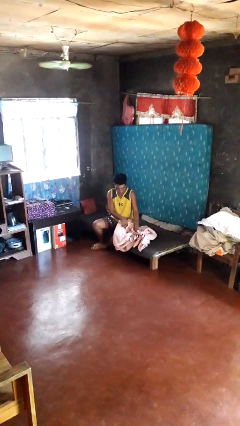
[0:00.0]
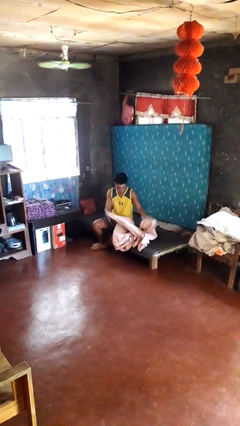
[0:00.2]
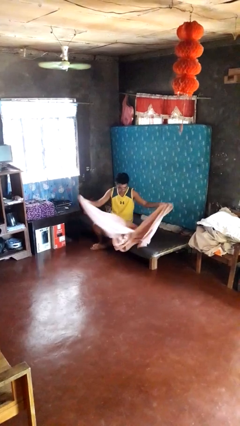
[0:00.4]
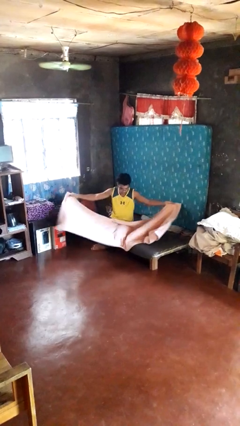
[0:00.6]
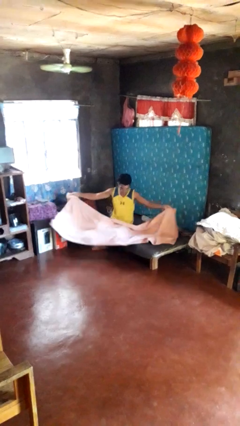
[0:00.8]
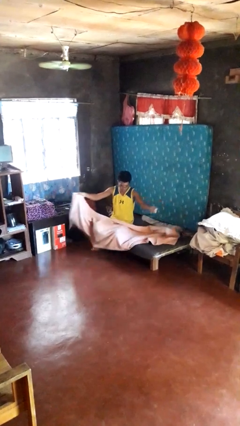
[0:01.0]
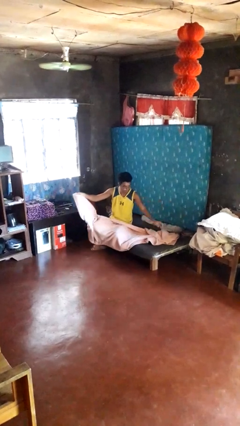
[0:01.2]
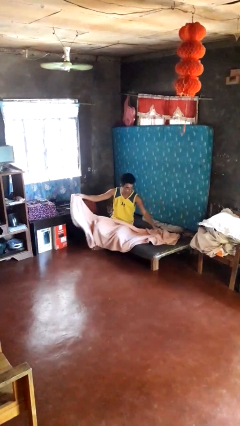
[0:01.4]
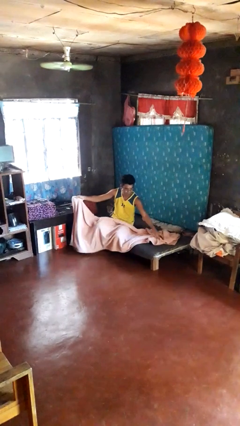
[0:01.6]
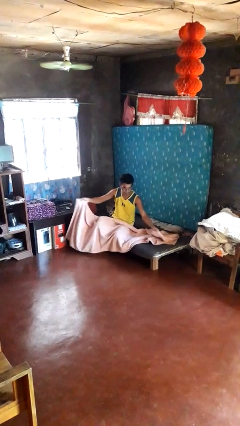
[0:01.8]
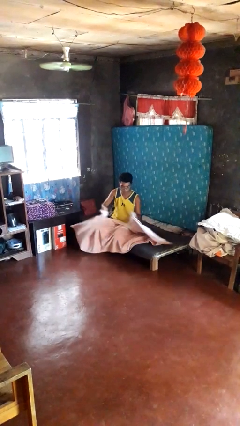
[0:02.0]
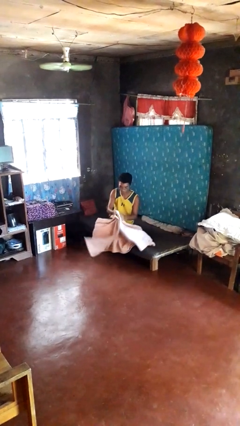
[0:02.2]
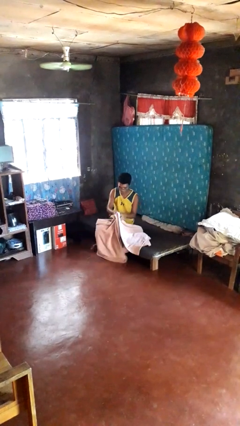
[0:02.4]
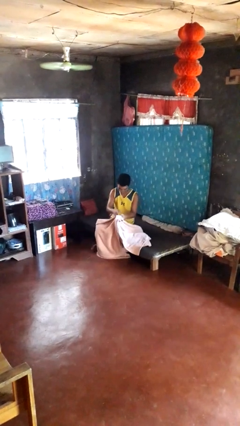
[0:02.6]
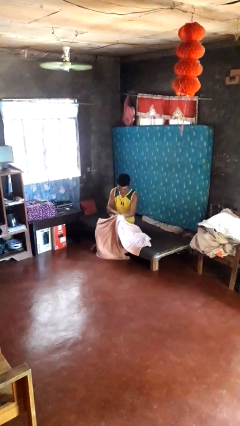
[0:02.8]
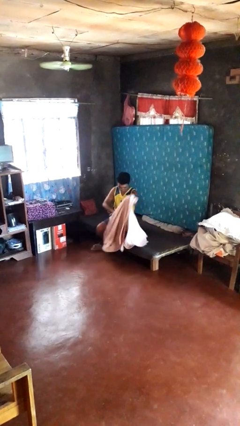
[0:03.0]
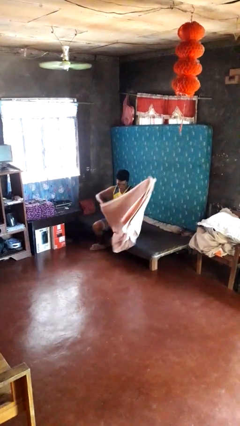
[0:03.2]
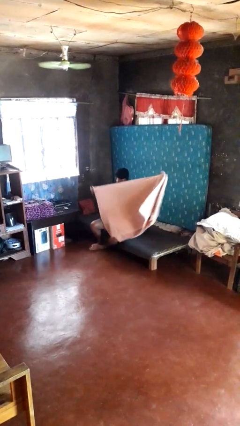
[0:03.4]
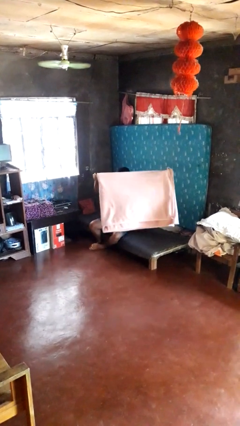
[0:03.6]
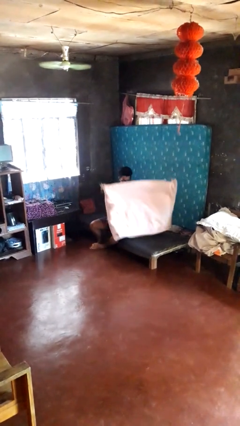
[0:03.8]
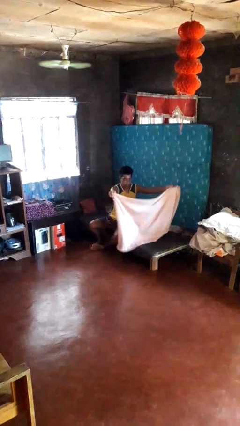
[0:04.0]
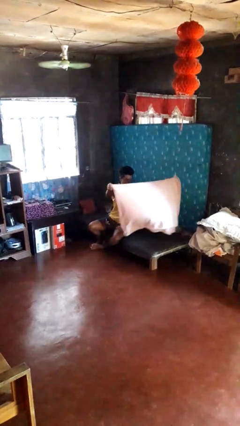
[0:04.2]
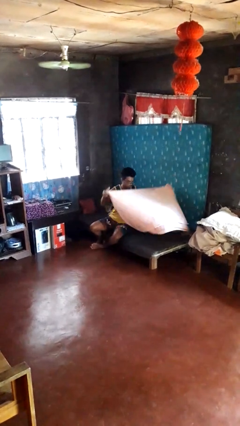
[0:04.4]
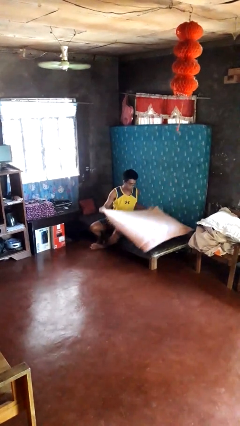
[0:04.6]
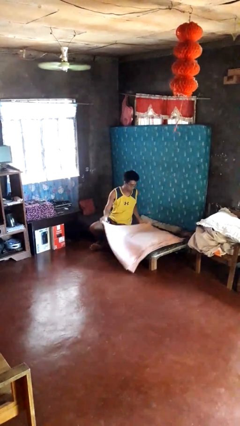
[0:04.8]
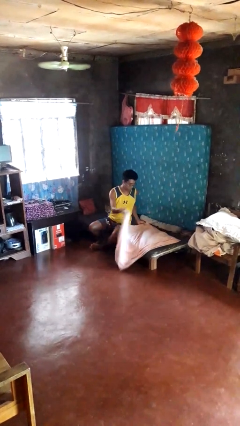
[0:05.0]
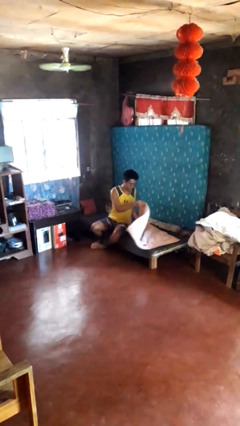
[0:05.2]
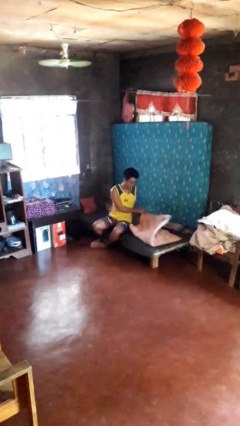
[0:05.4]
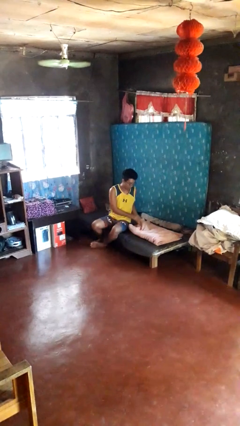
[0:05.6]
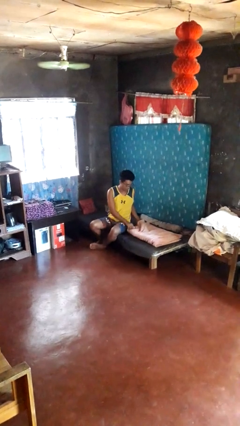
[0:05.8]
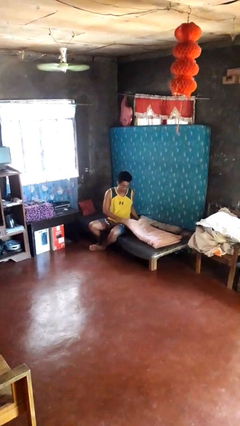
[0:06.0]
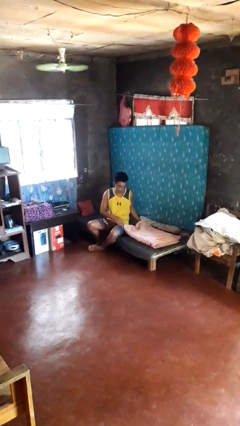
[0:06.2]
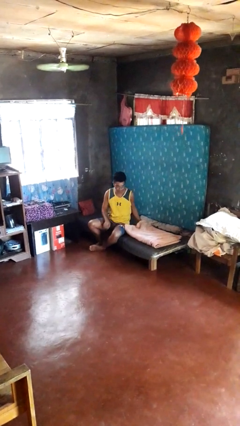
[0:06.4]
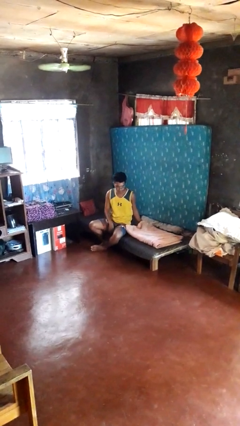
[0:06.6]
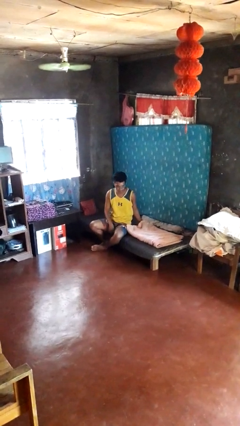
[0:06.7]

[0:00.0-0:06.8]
person folds blanket

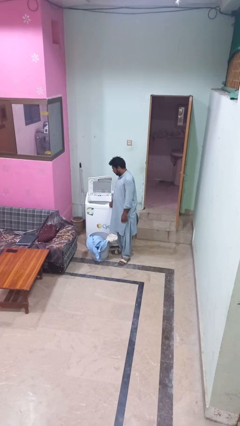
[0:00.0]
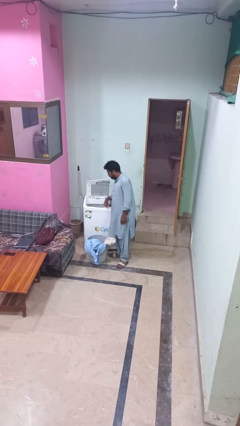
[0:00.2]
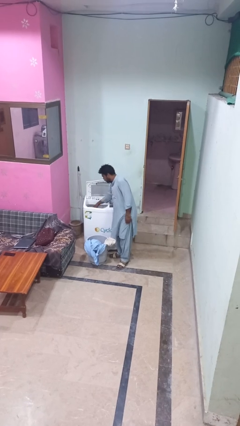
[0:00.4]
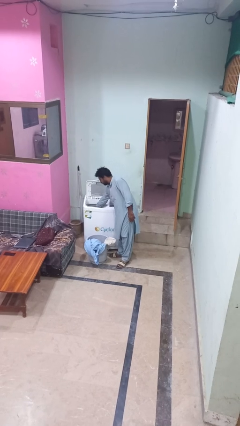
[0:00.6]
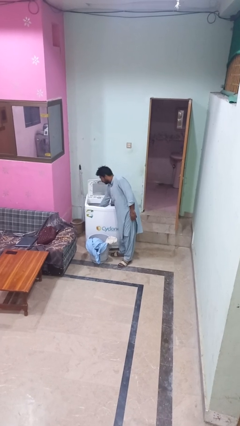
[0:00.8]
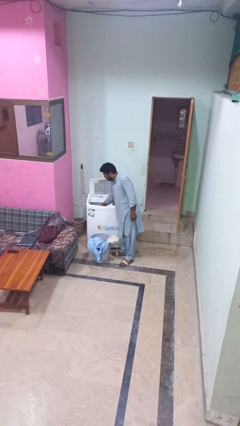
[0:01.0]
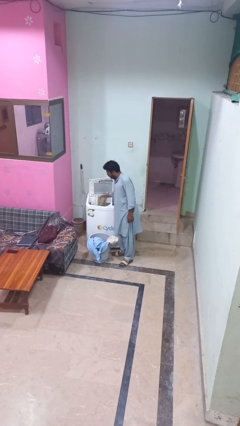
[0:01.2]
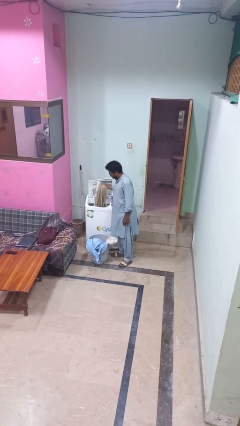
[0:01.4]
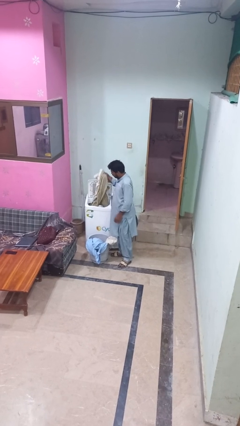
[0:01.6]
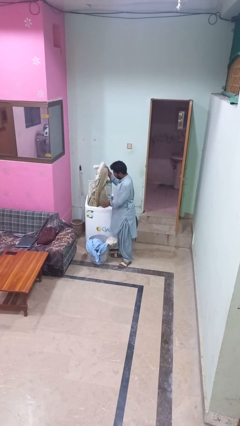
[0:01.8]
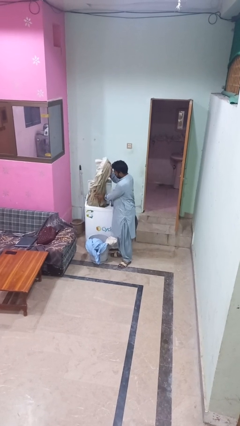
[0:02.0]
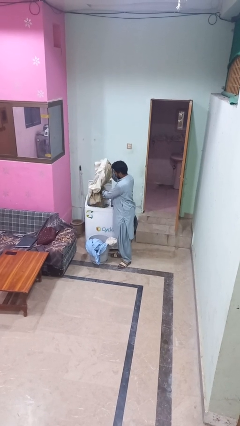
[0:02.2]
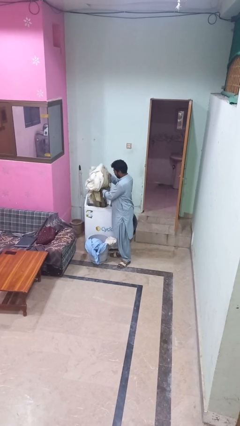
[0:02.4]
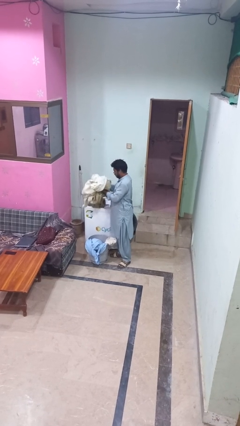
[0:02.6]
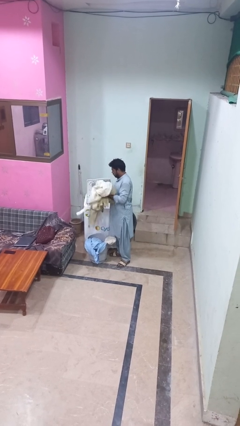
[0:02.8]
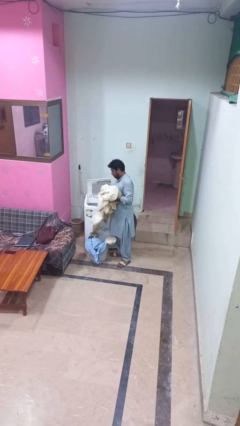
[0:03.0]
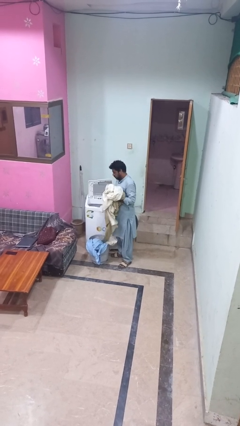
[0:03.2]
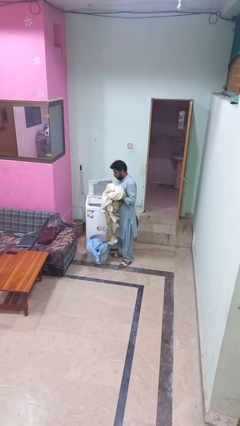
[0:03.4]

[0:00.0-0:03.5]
person unloads clotheswasher

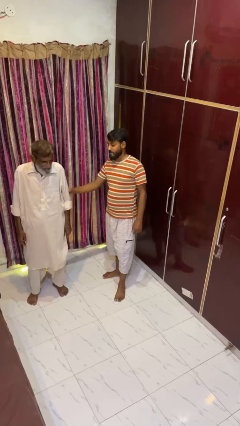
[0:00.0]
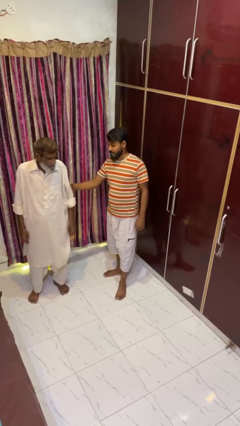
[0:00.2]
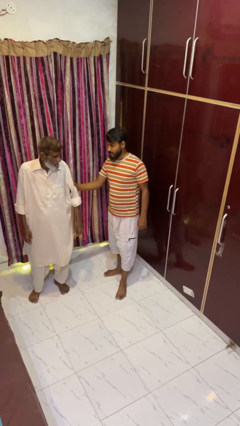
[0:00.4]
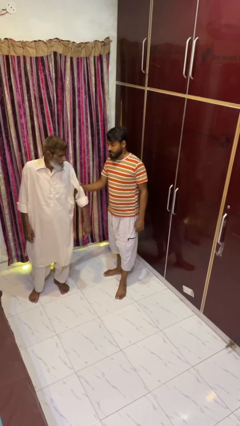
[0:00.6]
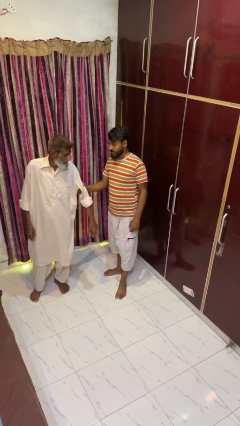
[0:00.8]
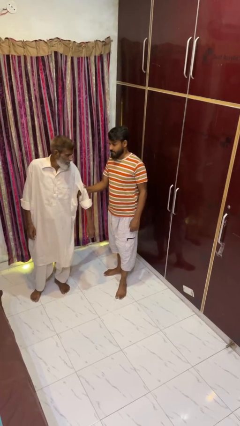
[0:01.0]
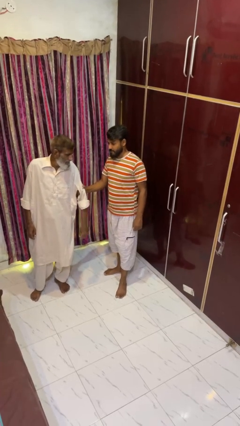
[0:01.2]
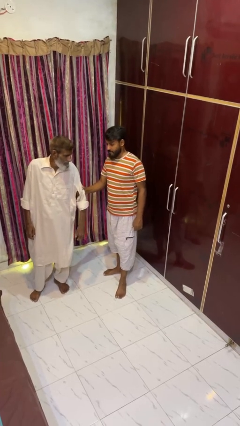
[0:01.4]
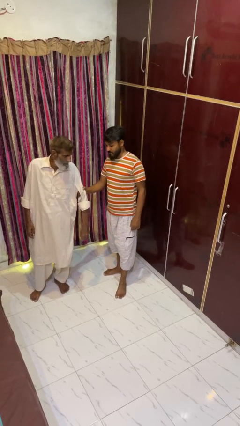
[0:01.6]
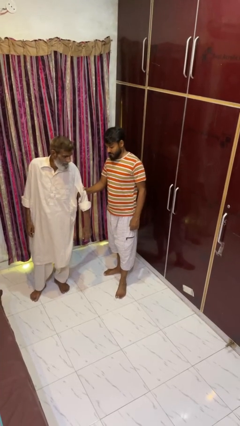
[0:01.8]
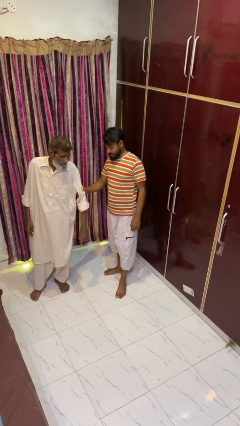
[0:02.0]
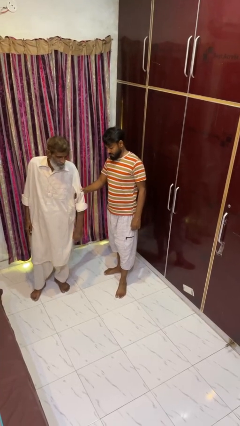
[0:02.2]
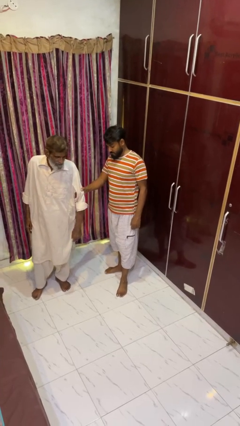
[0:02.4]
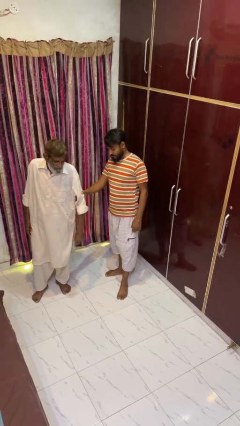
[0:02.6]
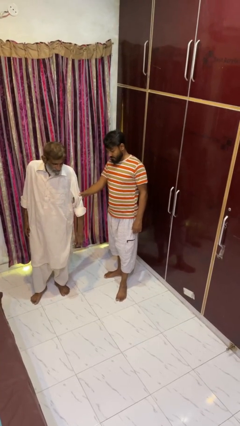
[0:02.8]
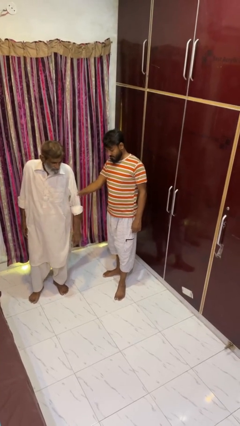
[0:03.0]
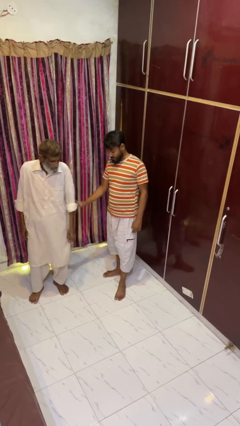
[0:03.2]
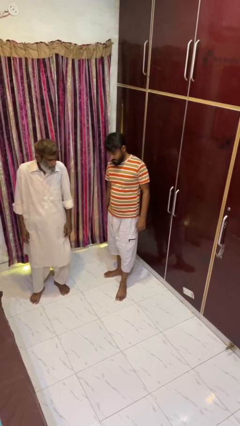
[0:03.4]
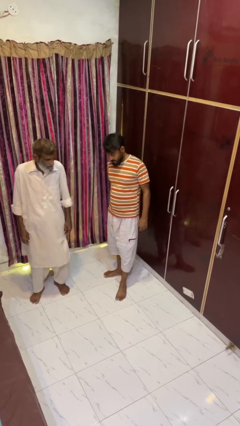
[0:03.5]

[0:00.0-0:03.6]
person grabs person by bicep

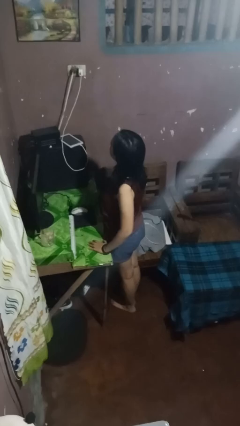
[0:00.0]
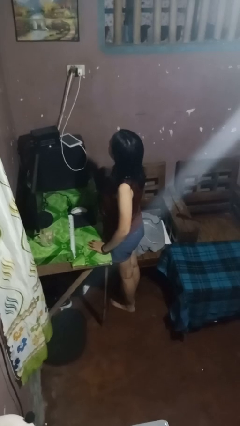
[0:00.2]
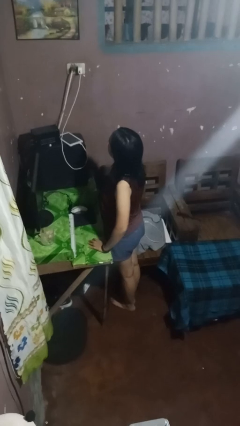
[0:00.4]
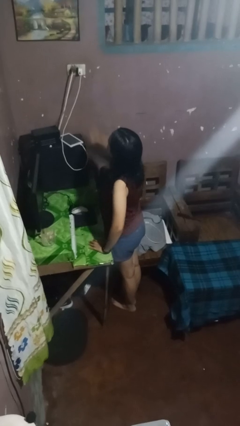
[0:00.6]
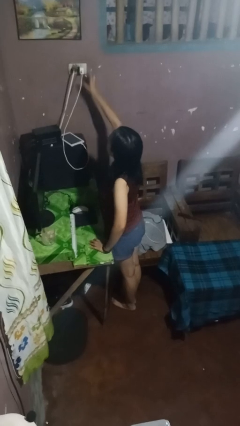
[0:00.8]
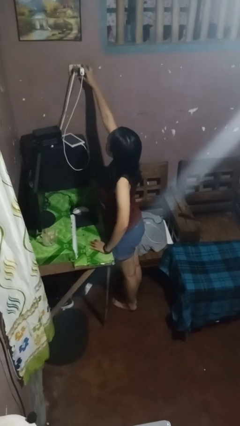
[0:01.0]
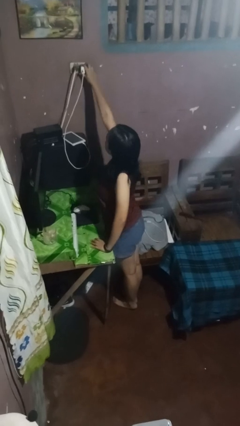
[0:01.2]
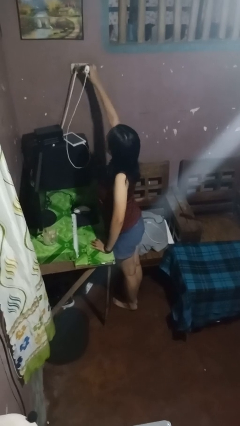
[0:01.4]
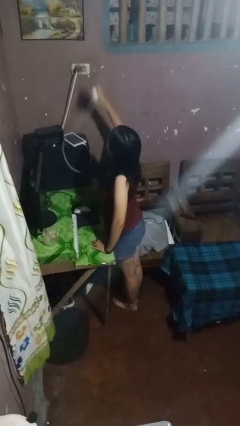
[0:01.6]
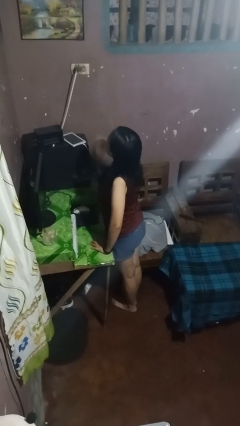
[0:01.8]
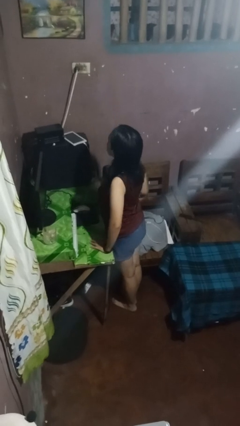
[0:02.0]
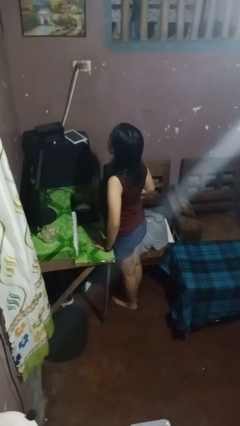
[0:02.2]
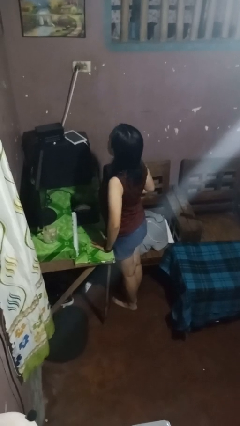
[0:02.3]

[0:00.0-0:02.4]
person unplugs from electrical socket

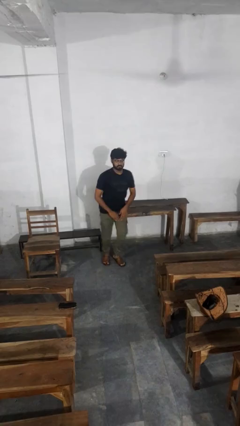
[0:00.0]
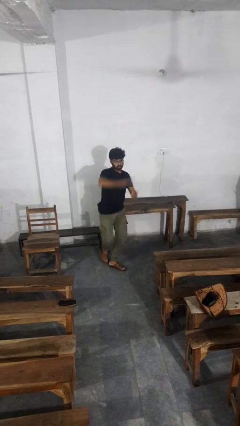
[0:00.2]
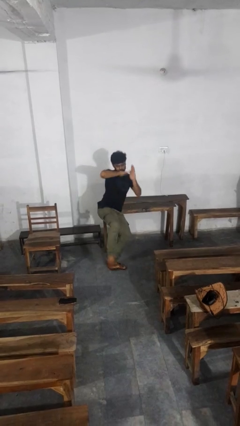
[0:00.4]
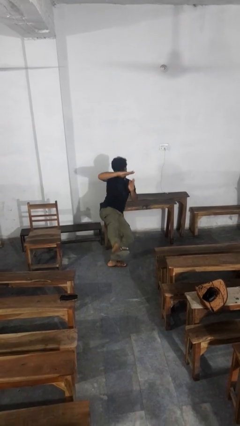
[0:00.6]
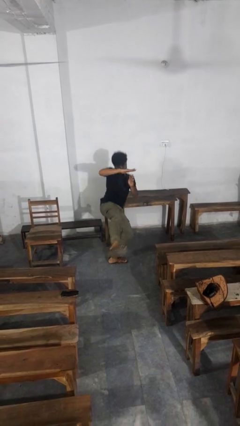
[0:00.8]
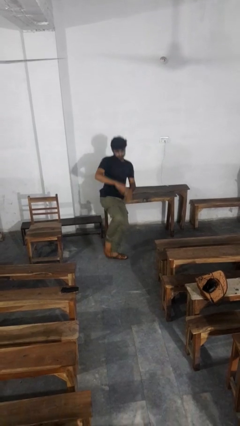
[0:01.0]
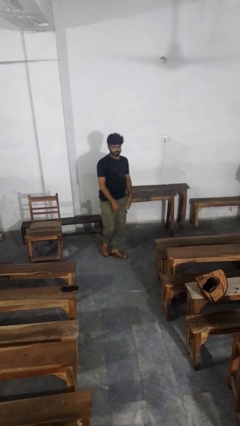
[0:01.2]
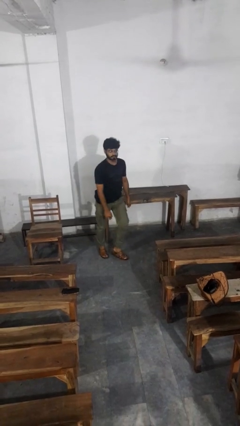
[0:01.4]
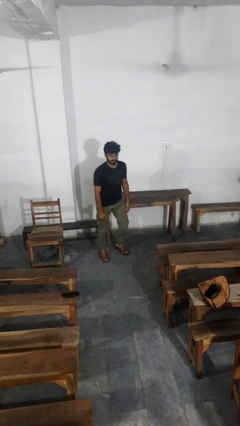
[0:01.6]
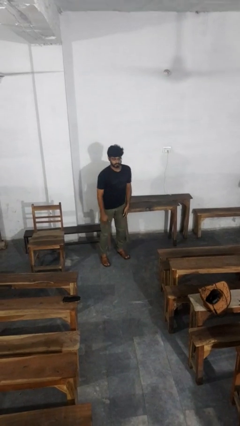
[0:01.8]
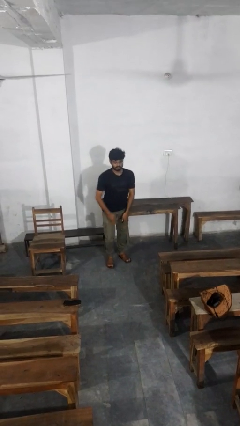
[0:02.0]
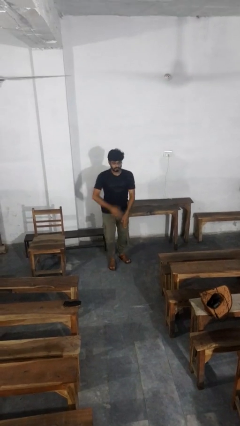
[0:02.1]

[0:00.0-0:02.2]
person karate kicks
